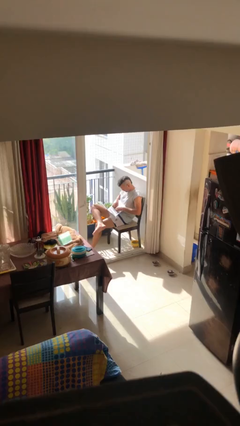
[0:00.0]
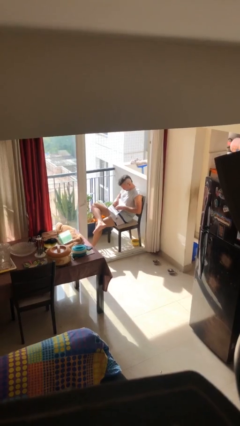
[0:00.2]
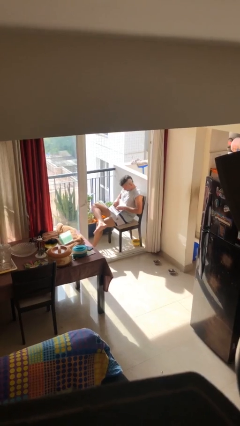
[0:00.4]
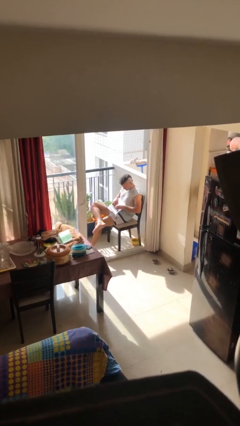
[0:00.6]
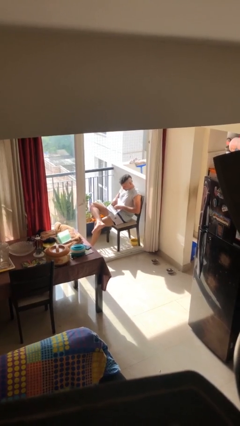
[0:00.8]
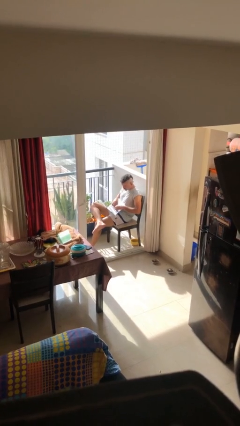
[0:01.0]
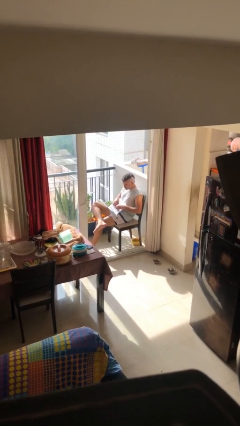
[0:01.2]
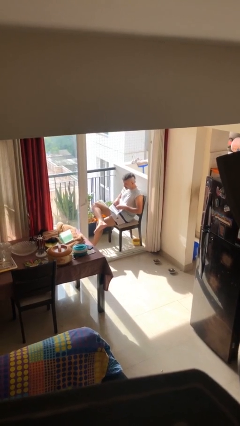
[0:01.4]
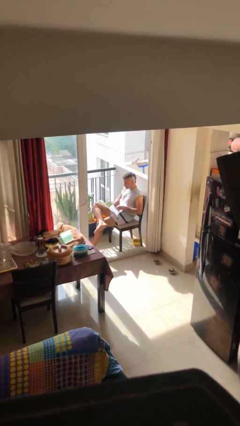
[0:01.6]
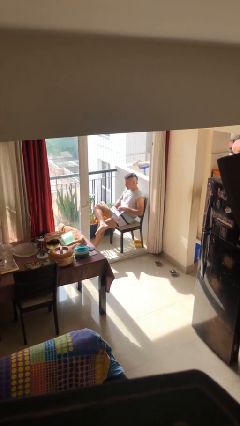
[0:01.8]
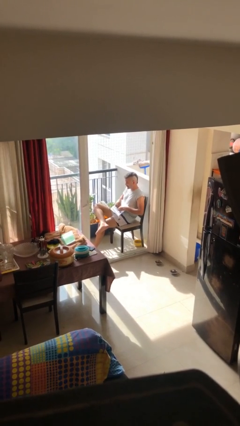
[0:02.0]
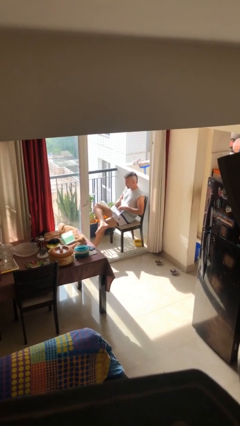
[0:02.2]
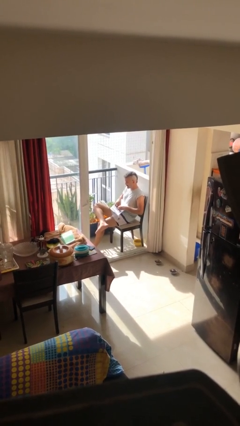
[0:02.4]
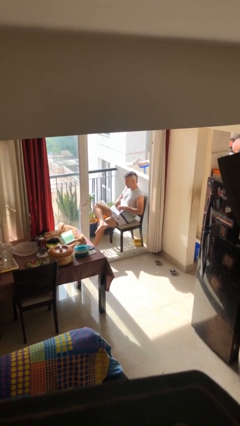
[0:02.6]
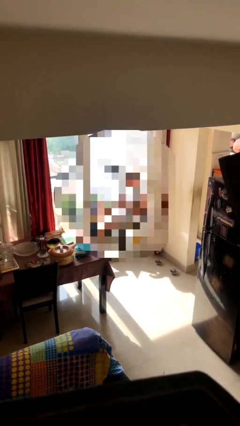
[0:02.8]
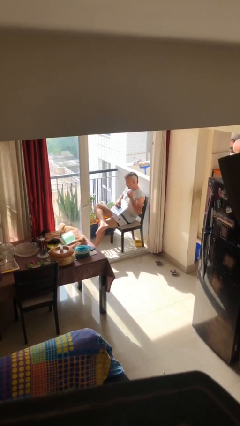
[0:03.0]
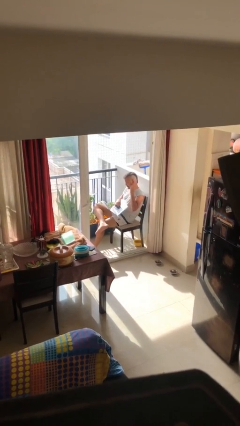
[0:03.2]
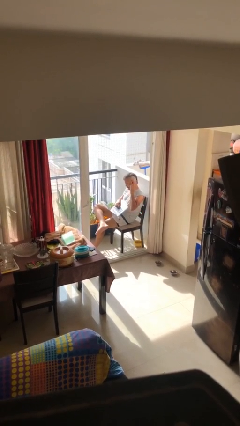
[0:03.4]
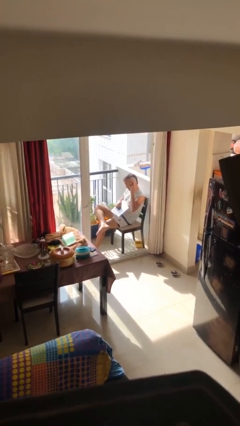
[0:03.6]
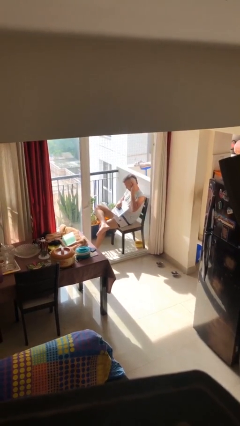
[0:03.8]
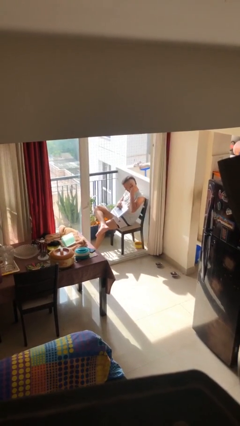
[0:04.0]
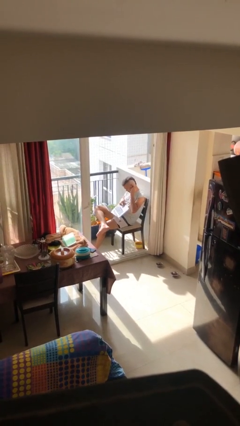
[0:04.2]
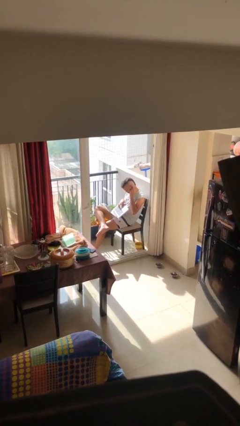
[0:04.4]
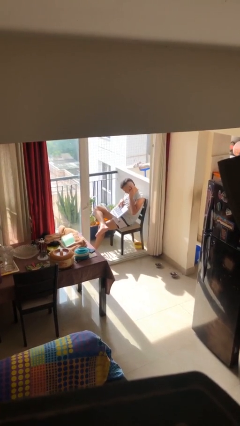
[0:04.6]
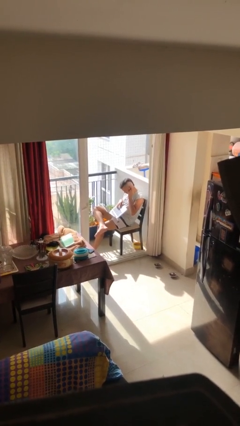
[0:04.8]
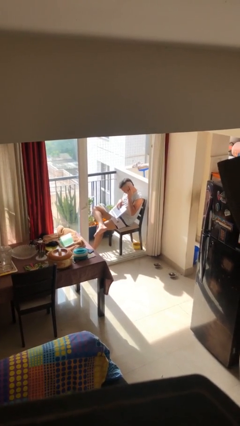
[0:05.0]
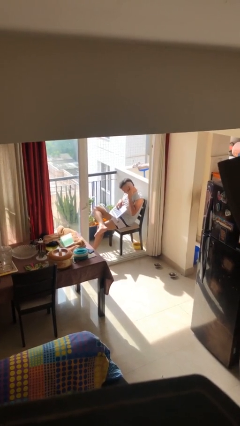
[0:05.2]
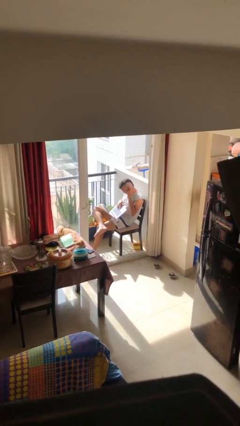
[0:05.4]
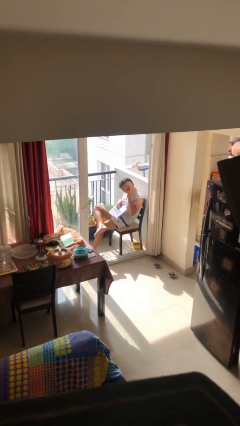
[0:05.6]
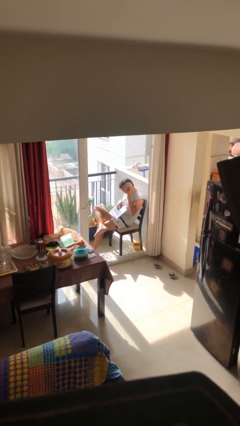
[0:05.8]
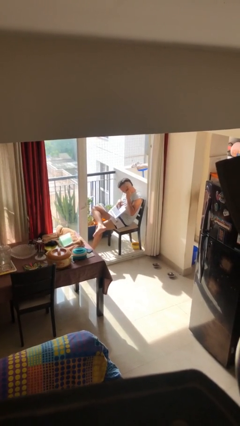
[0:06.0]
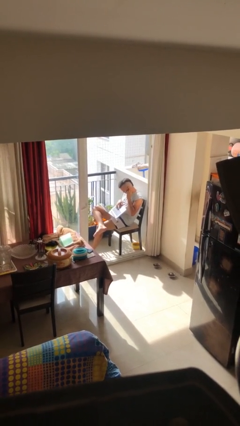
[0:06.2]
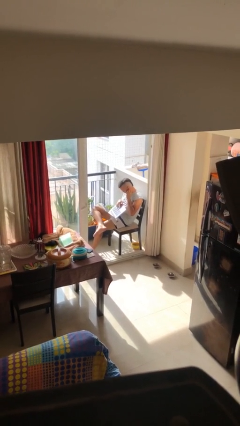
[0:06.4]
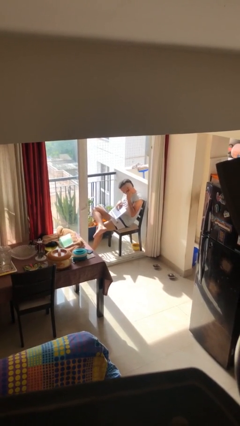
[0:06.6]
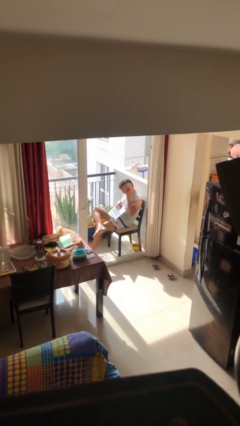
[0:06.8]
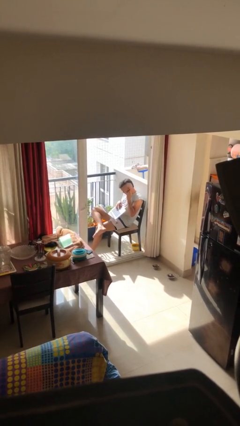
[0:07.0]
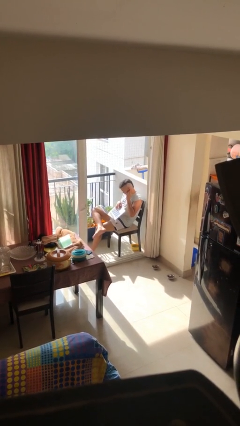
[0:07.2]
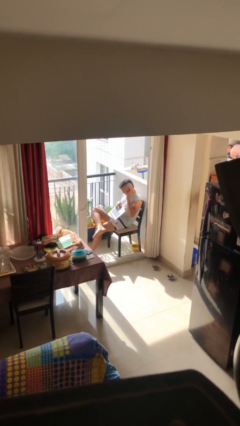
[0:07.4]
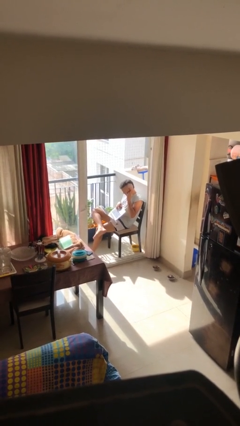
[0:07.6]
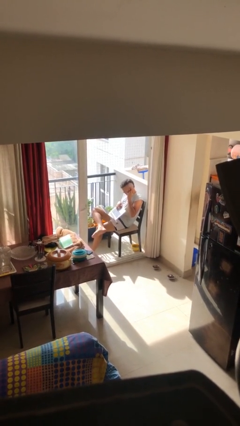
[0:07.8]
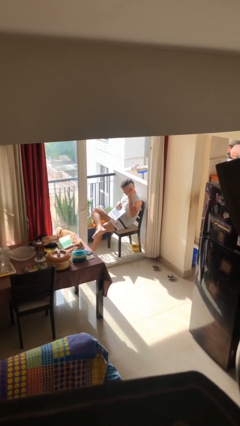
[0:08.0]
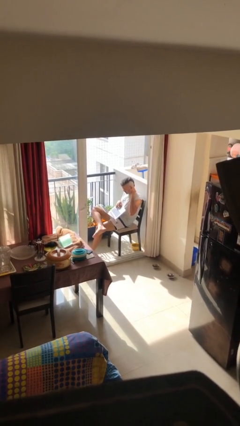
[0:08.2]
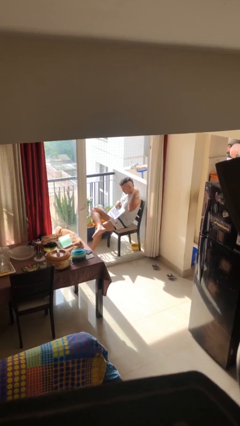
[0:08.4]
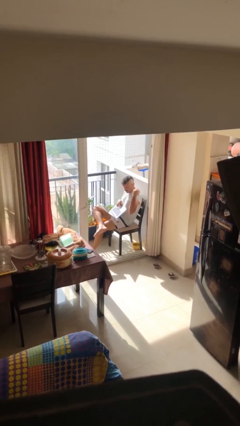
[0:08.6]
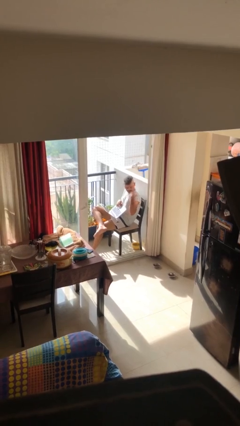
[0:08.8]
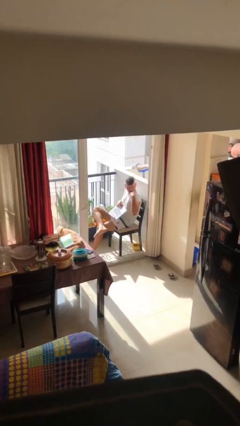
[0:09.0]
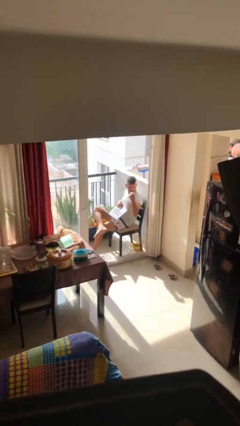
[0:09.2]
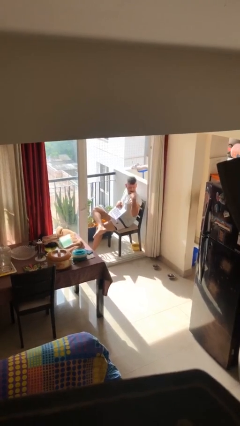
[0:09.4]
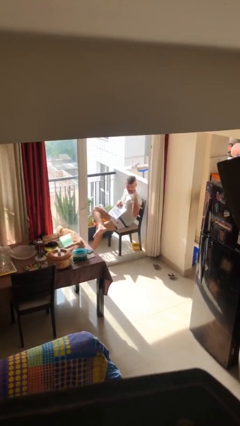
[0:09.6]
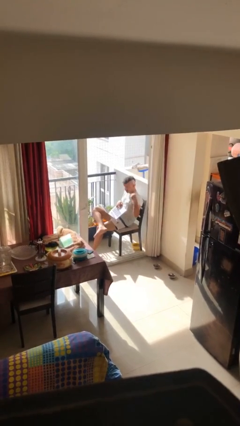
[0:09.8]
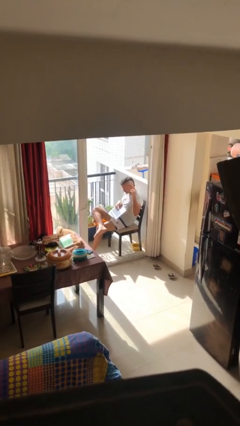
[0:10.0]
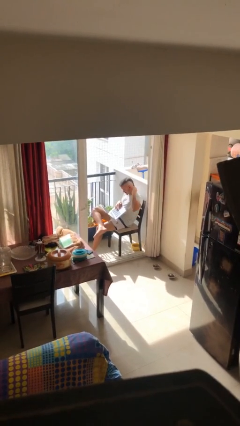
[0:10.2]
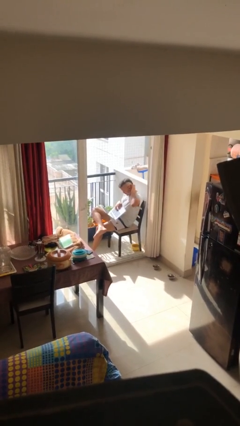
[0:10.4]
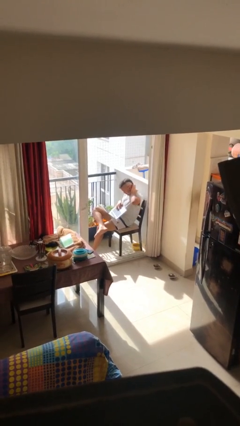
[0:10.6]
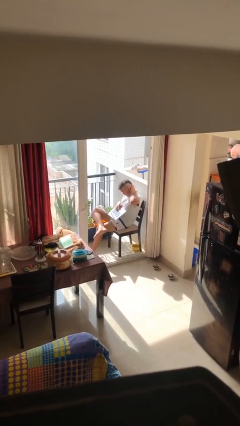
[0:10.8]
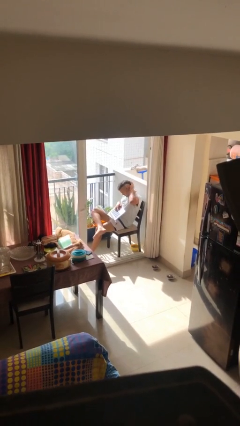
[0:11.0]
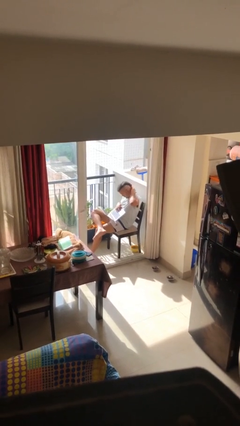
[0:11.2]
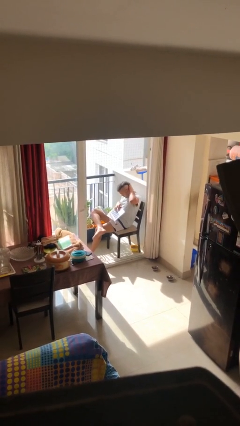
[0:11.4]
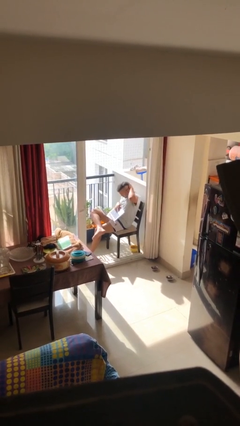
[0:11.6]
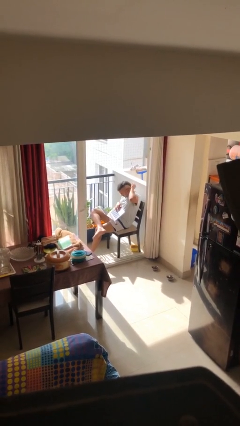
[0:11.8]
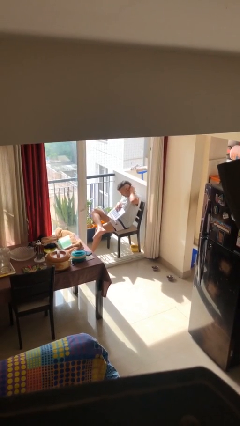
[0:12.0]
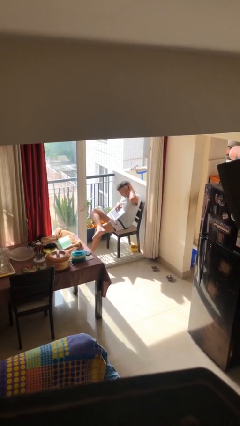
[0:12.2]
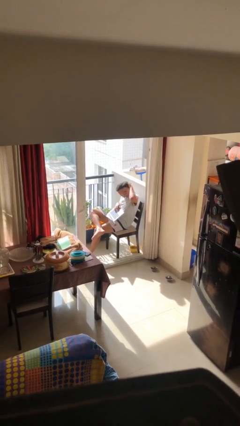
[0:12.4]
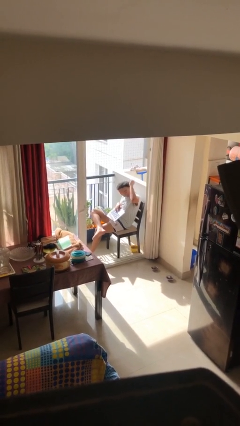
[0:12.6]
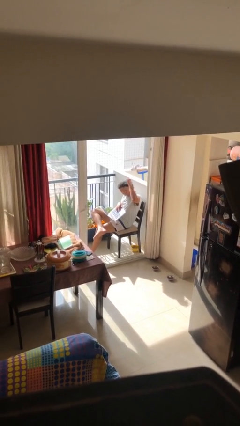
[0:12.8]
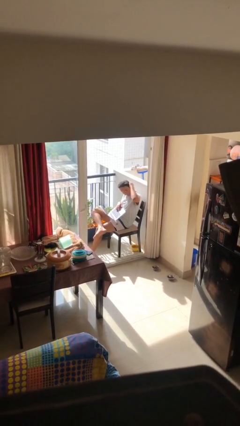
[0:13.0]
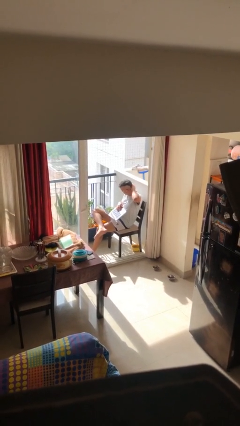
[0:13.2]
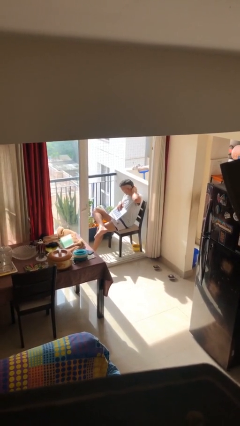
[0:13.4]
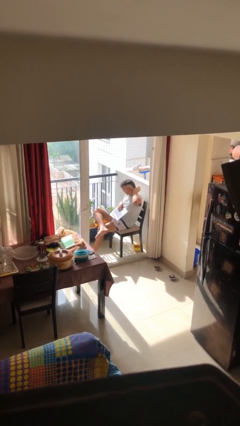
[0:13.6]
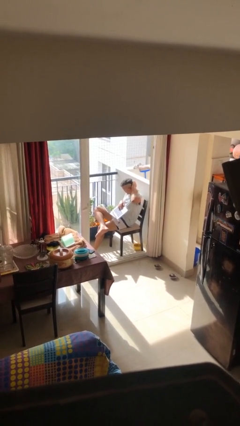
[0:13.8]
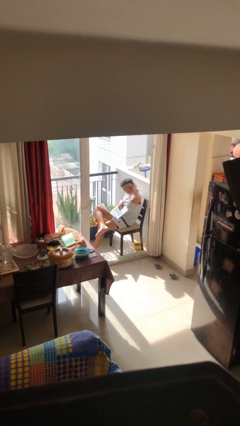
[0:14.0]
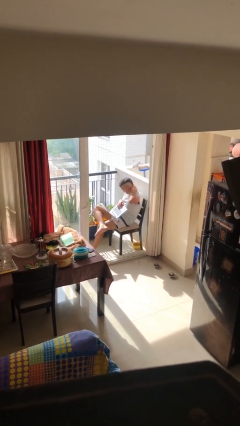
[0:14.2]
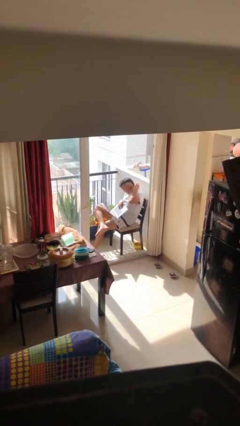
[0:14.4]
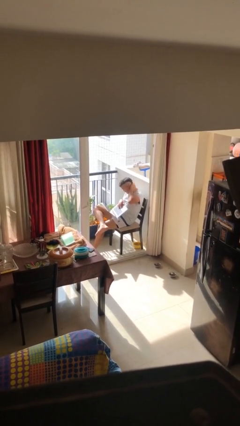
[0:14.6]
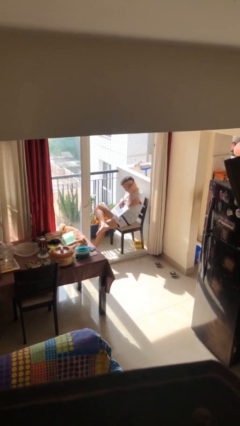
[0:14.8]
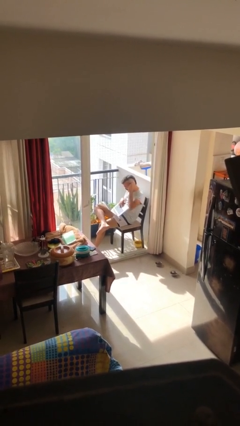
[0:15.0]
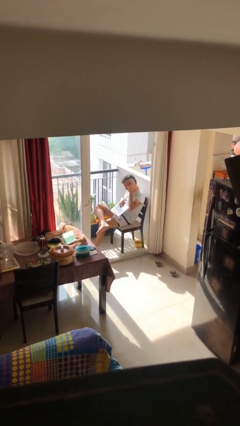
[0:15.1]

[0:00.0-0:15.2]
person interacts with laptop

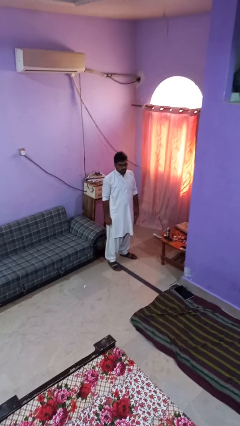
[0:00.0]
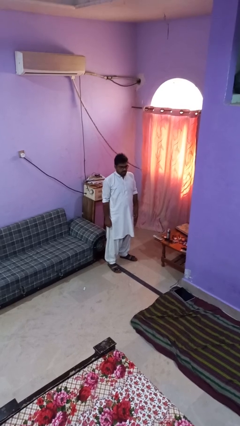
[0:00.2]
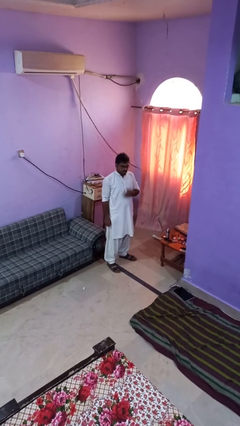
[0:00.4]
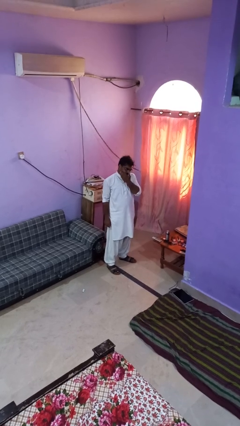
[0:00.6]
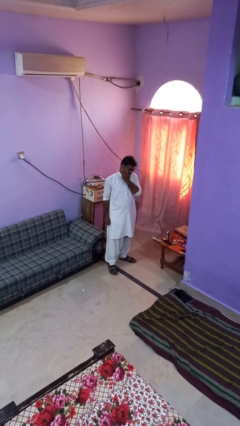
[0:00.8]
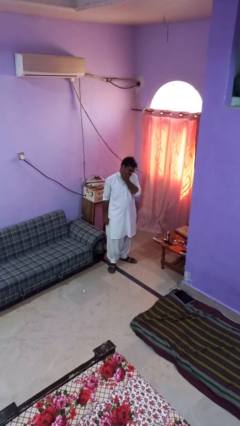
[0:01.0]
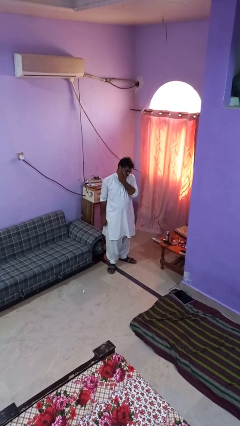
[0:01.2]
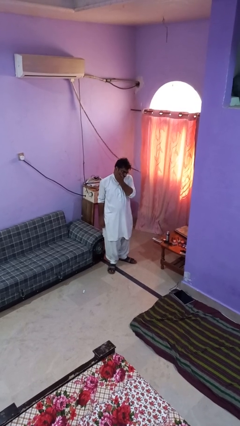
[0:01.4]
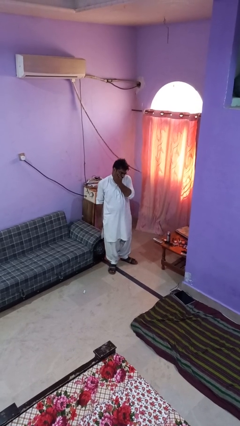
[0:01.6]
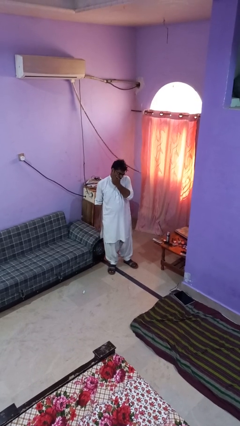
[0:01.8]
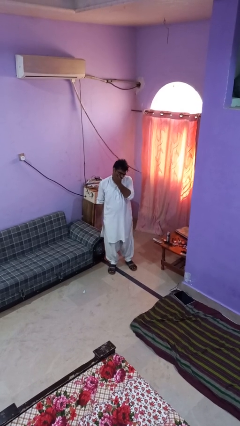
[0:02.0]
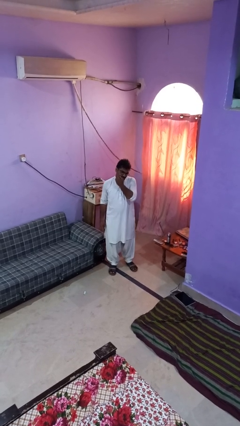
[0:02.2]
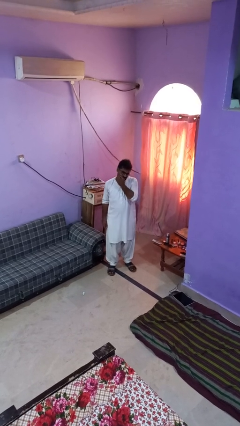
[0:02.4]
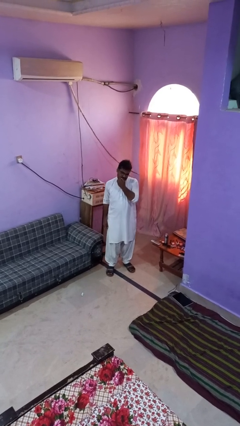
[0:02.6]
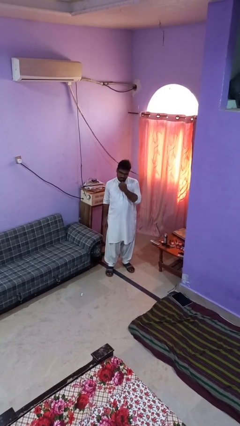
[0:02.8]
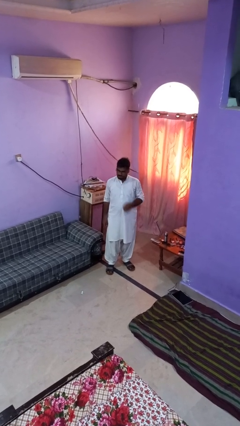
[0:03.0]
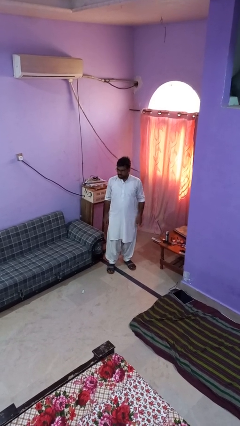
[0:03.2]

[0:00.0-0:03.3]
person scratches face
